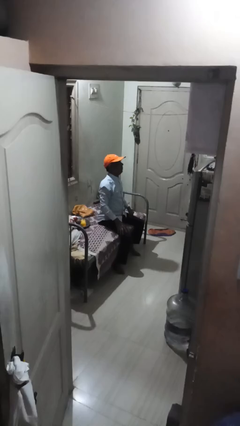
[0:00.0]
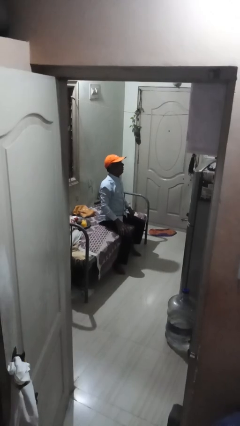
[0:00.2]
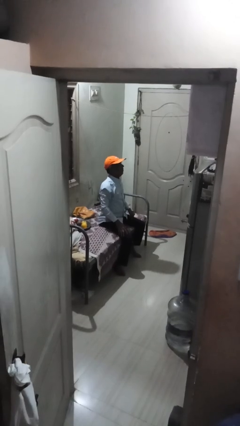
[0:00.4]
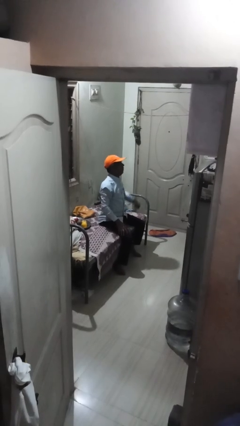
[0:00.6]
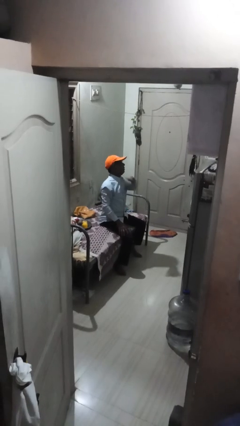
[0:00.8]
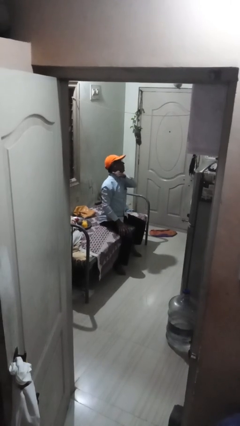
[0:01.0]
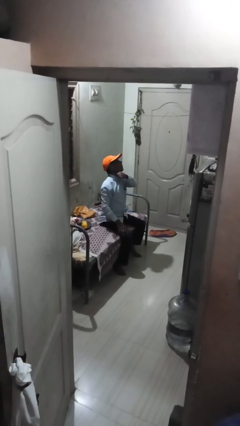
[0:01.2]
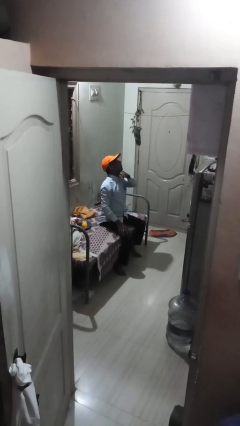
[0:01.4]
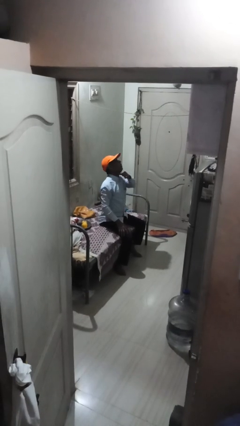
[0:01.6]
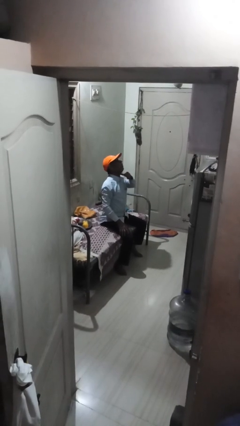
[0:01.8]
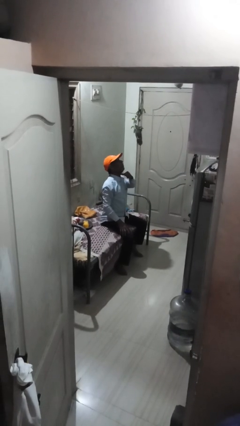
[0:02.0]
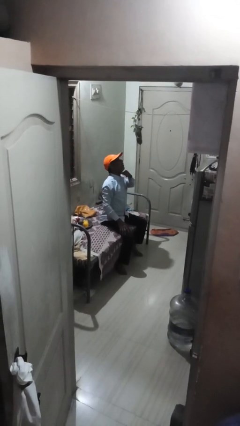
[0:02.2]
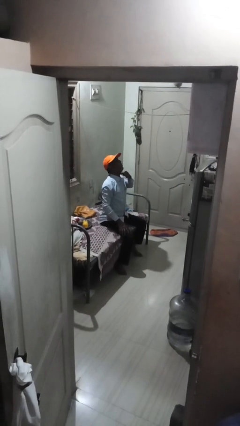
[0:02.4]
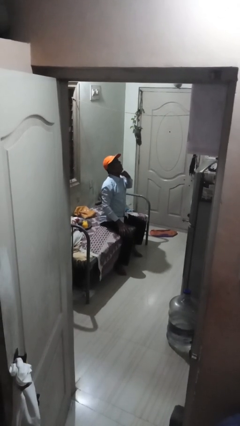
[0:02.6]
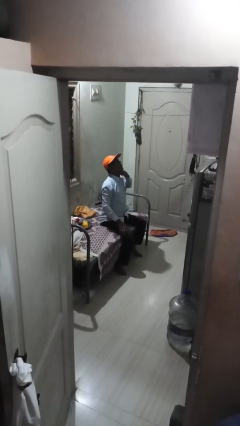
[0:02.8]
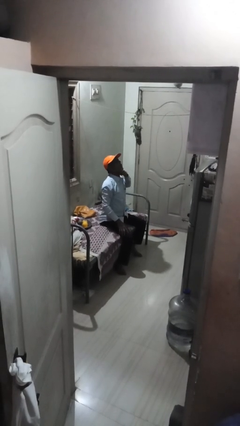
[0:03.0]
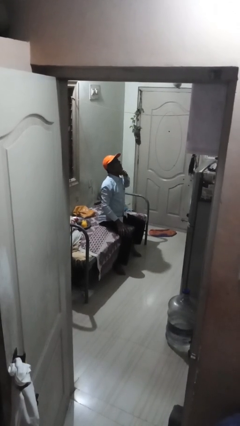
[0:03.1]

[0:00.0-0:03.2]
person gestures cut

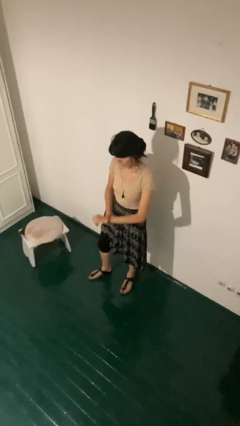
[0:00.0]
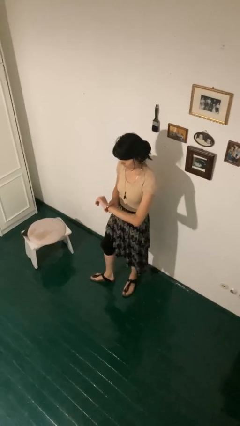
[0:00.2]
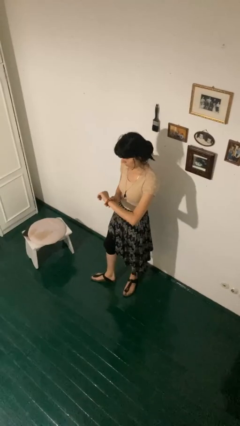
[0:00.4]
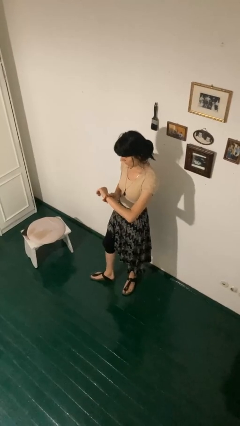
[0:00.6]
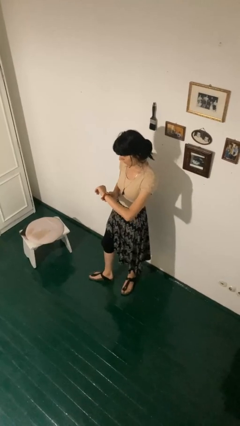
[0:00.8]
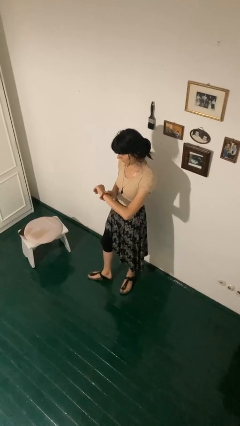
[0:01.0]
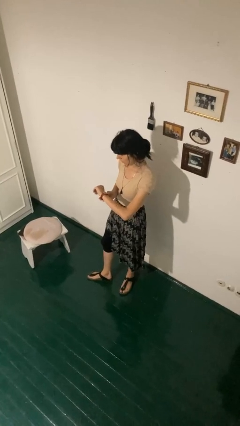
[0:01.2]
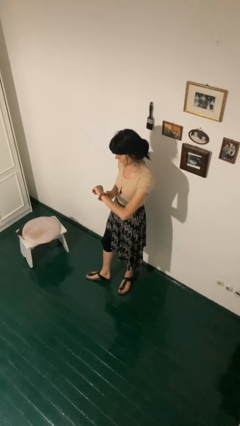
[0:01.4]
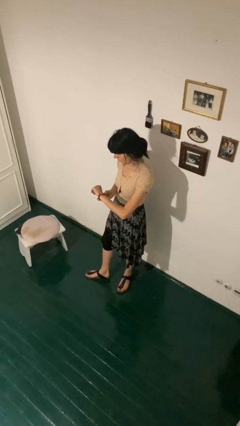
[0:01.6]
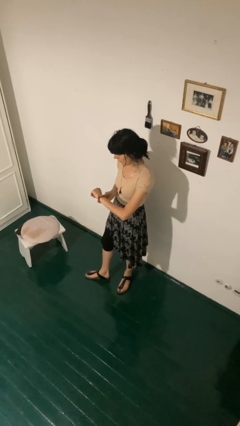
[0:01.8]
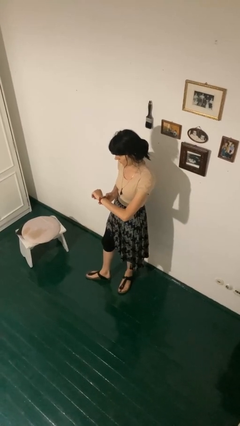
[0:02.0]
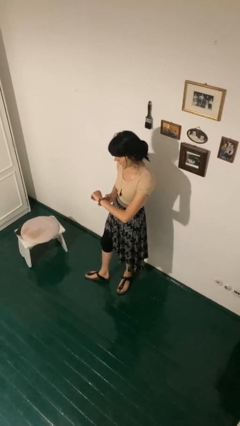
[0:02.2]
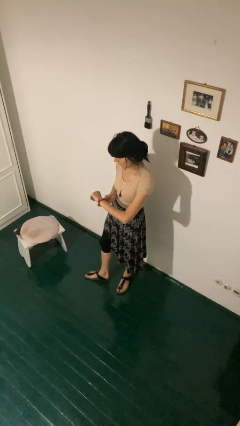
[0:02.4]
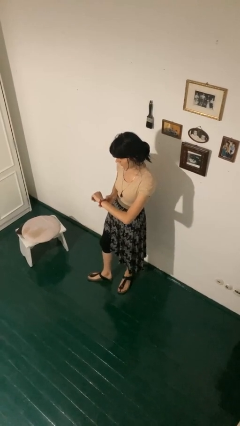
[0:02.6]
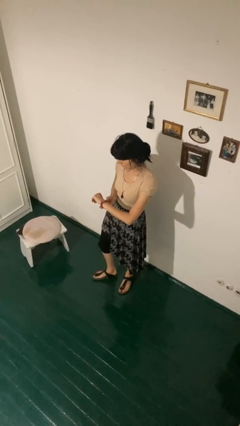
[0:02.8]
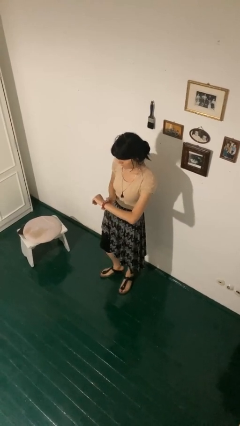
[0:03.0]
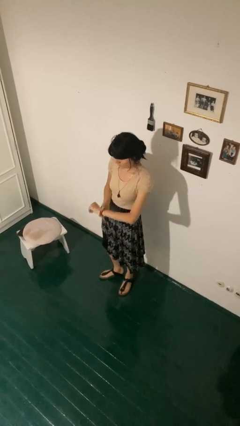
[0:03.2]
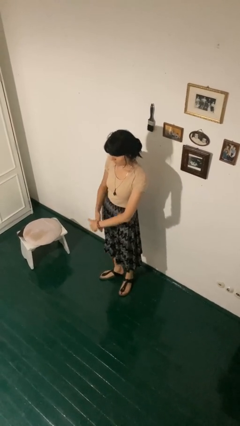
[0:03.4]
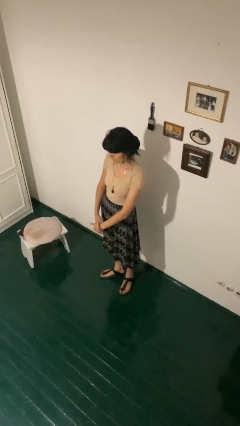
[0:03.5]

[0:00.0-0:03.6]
person looks at wristwatch

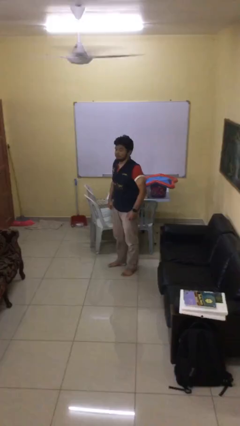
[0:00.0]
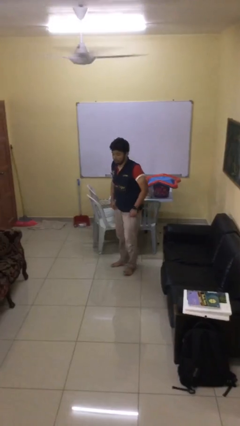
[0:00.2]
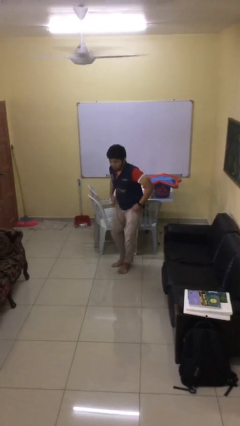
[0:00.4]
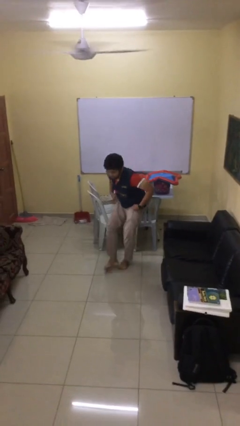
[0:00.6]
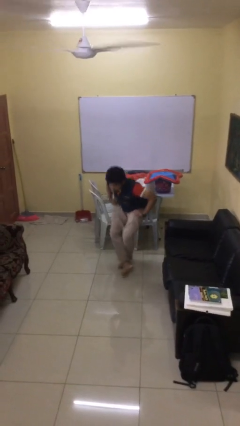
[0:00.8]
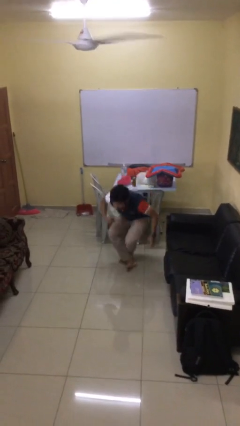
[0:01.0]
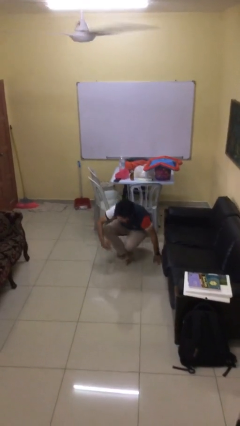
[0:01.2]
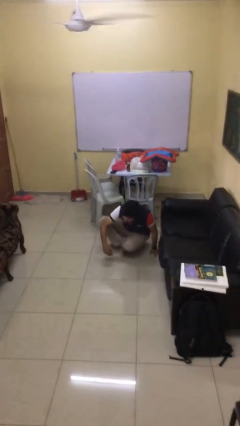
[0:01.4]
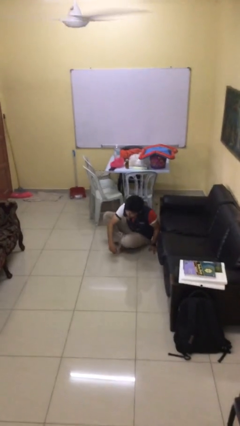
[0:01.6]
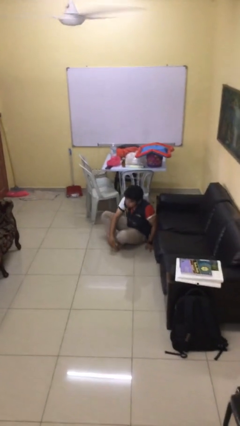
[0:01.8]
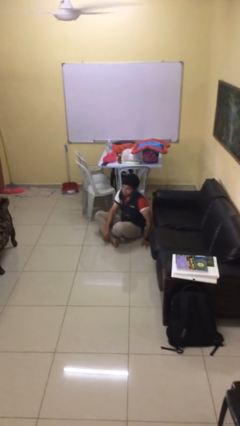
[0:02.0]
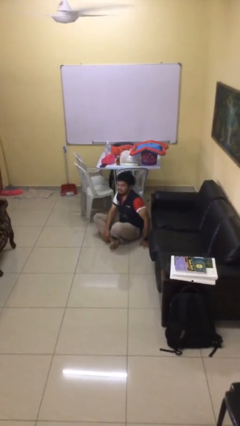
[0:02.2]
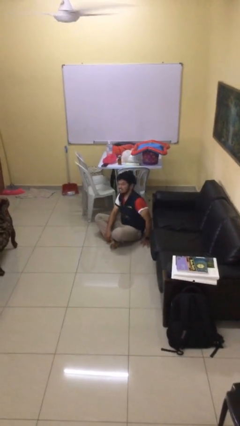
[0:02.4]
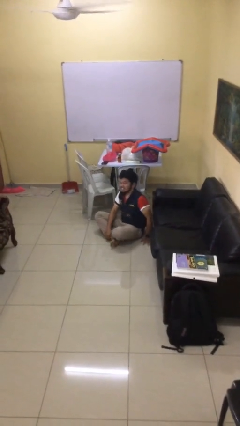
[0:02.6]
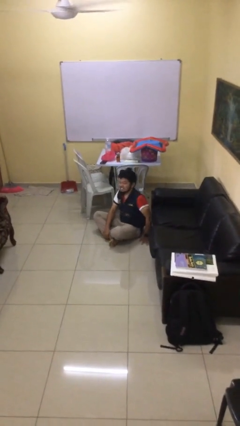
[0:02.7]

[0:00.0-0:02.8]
person sits crisscross

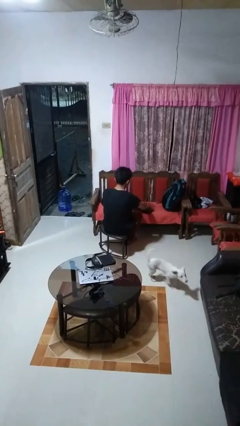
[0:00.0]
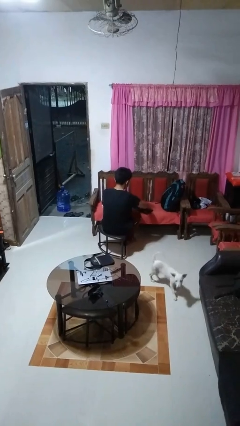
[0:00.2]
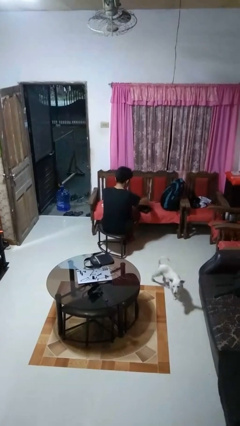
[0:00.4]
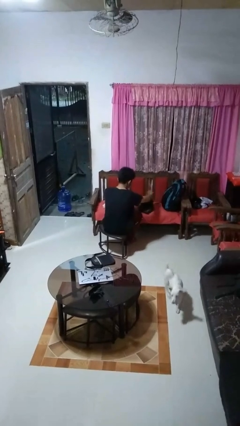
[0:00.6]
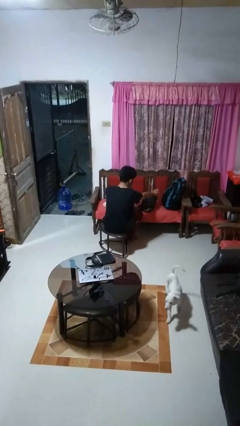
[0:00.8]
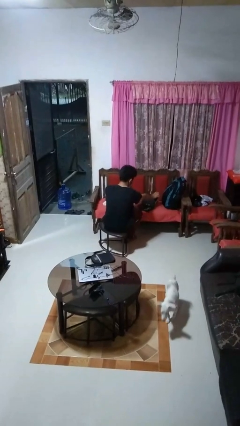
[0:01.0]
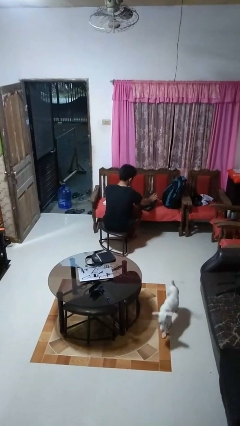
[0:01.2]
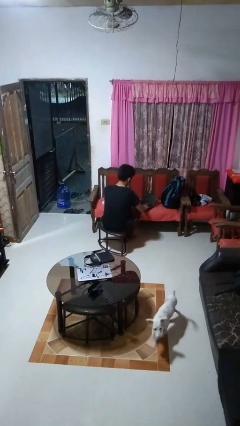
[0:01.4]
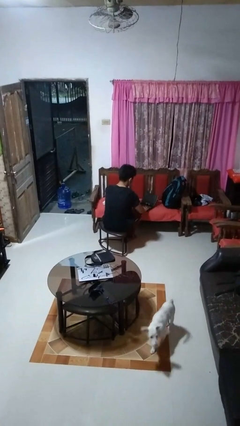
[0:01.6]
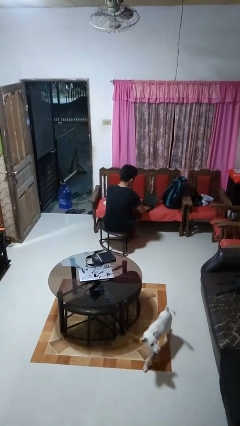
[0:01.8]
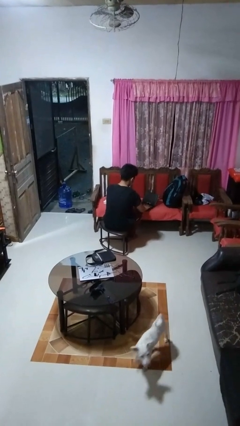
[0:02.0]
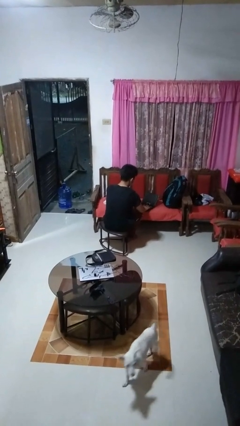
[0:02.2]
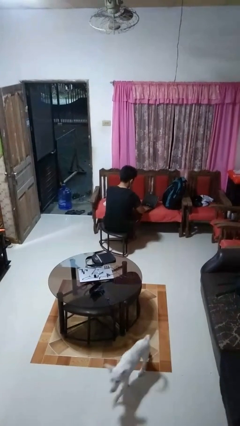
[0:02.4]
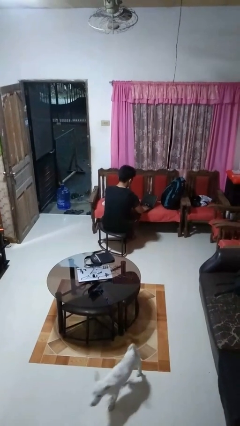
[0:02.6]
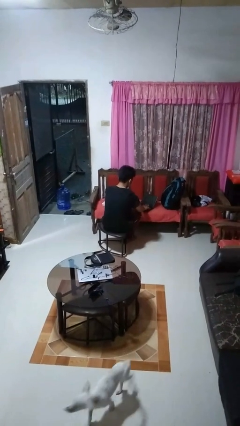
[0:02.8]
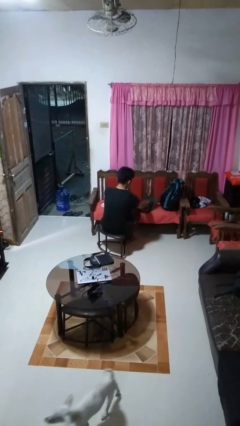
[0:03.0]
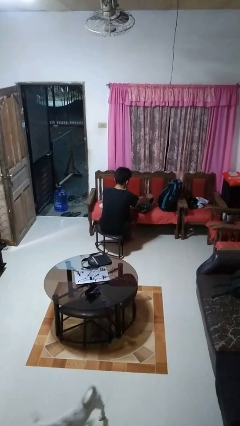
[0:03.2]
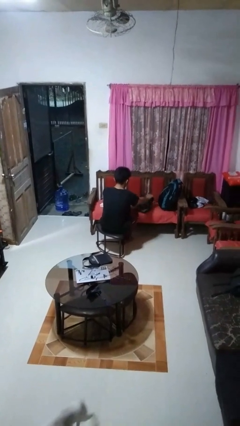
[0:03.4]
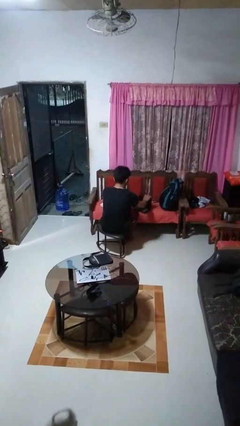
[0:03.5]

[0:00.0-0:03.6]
person opens laptop

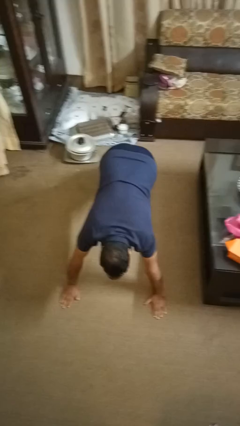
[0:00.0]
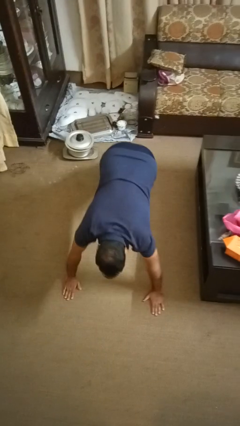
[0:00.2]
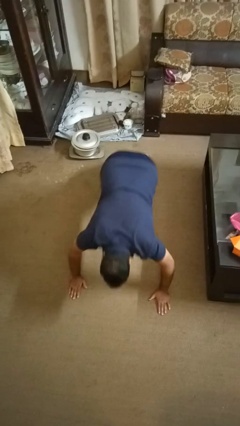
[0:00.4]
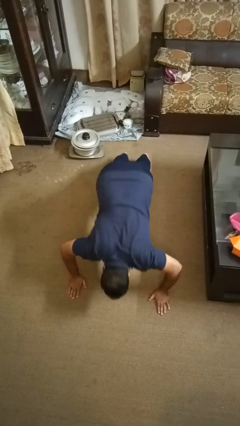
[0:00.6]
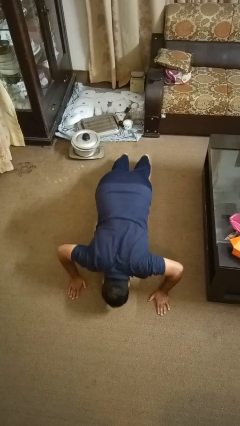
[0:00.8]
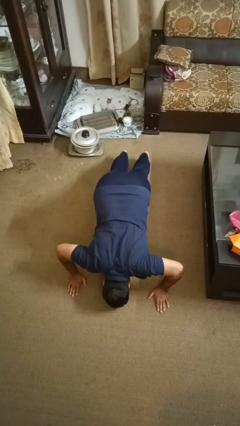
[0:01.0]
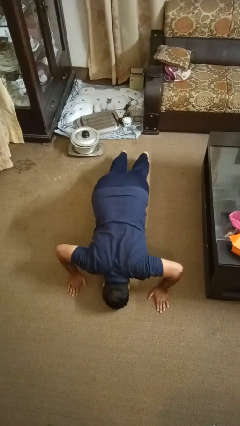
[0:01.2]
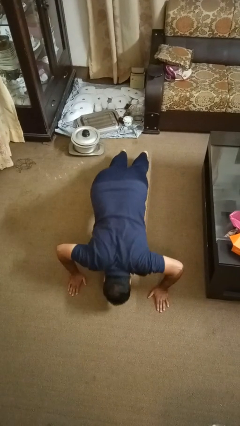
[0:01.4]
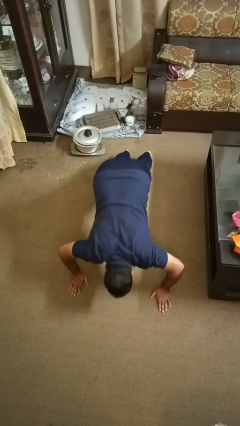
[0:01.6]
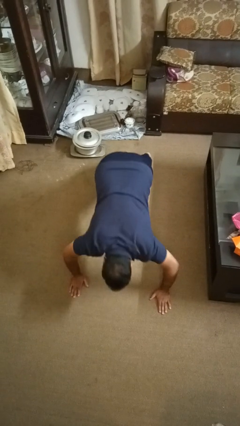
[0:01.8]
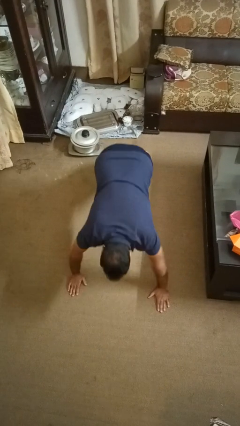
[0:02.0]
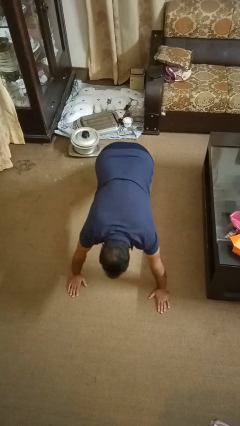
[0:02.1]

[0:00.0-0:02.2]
person exercises with pushup

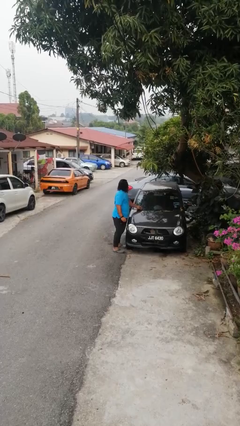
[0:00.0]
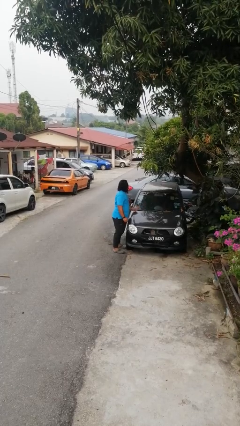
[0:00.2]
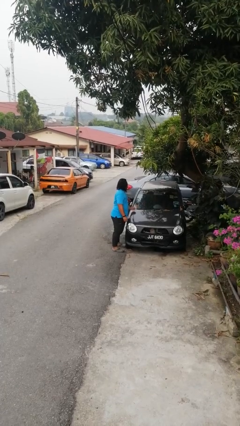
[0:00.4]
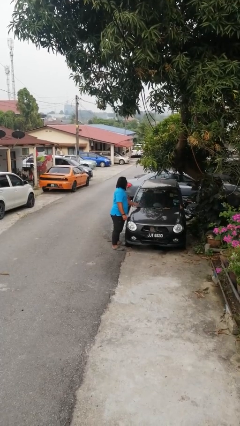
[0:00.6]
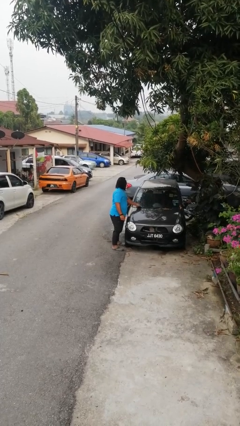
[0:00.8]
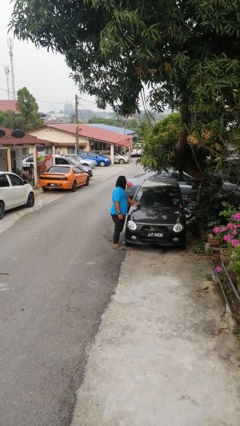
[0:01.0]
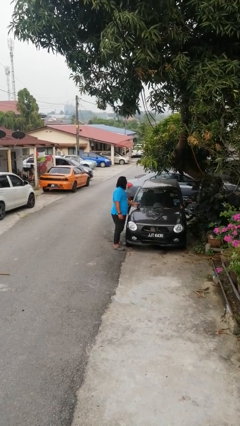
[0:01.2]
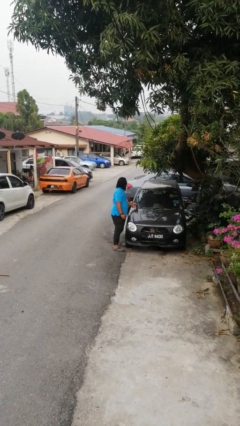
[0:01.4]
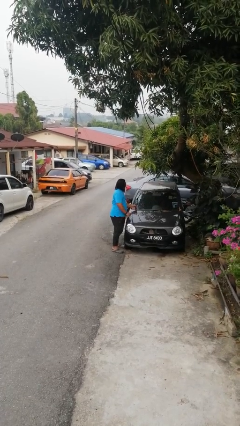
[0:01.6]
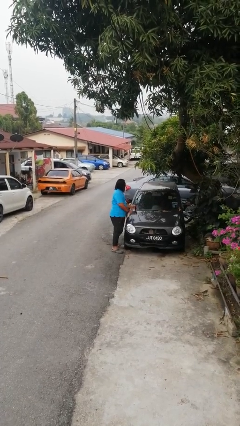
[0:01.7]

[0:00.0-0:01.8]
person flips up car wipers
